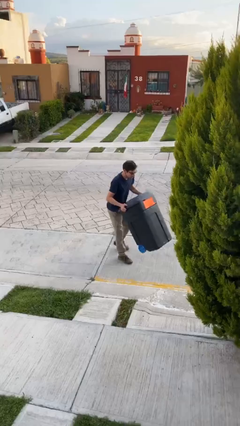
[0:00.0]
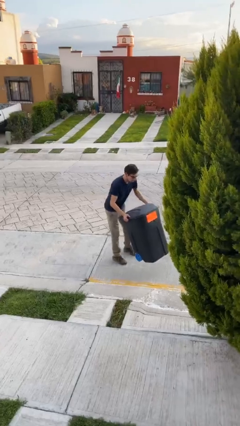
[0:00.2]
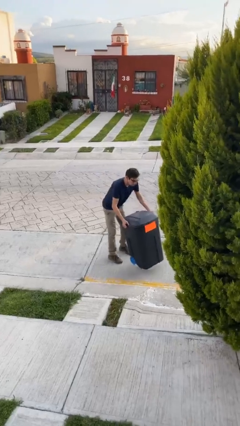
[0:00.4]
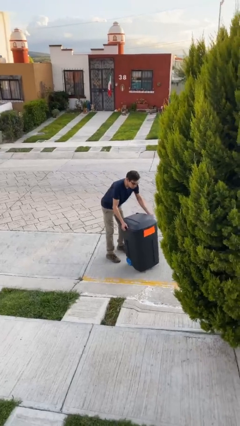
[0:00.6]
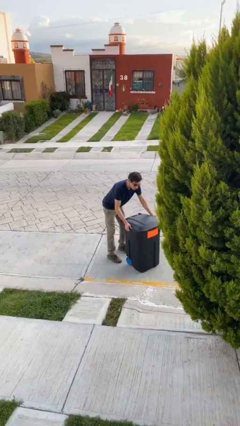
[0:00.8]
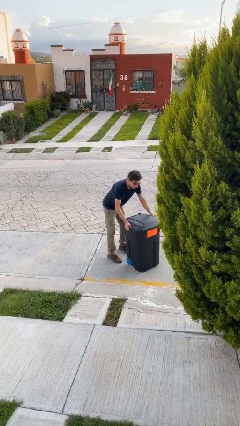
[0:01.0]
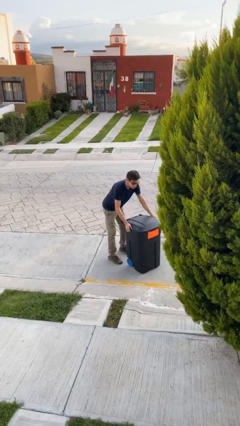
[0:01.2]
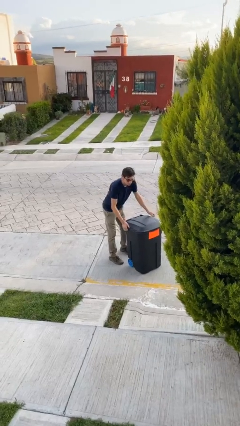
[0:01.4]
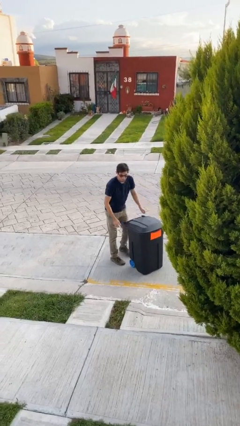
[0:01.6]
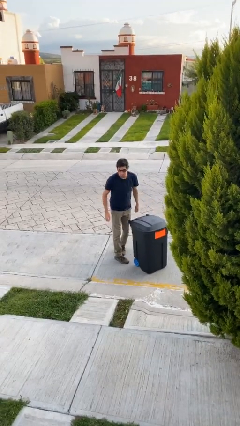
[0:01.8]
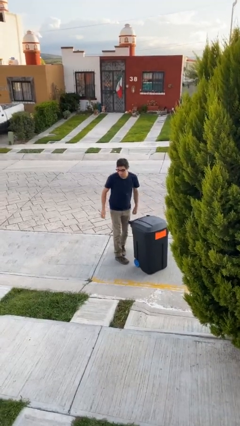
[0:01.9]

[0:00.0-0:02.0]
person puts down object on floor

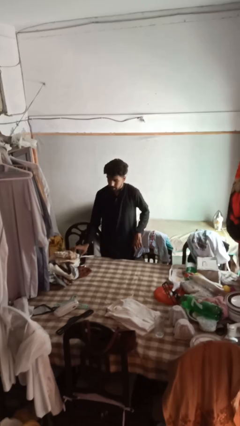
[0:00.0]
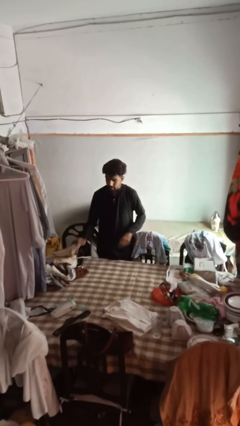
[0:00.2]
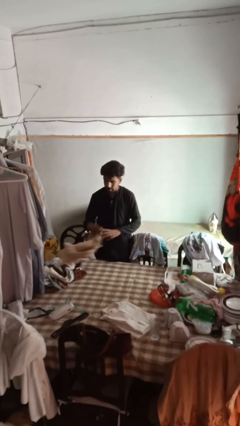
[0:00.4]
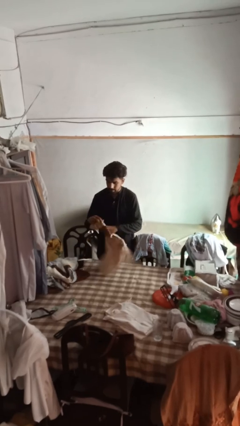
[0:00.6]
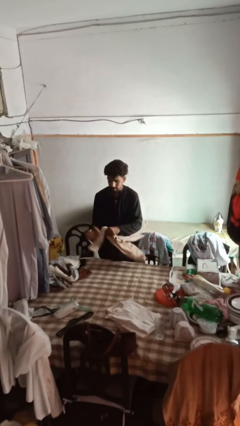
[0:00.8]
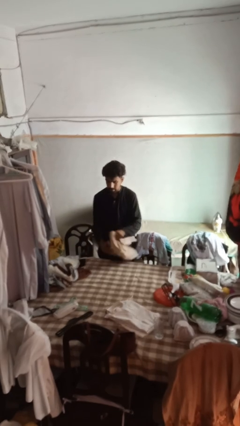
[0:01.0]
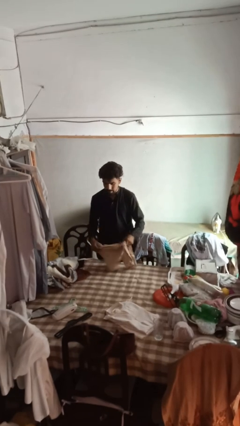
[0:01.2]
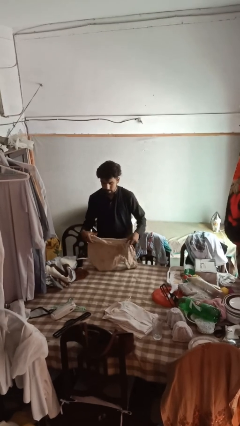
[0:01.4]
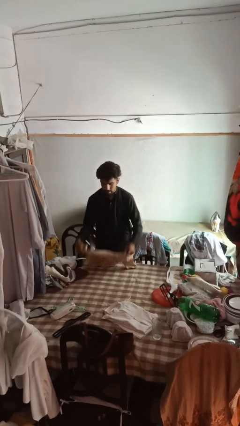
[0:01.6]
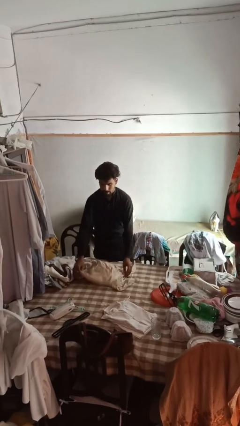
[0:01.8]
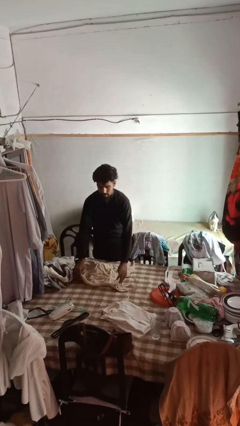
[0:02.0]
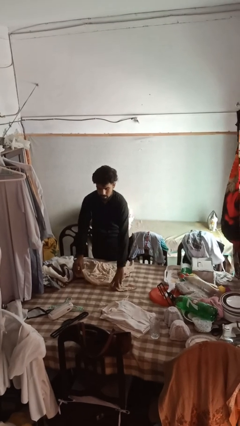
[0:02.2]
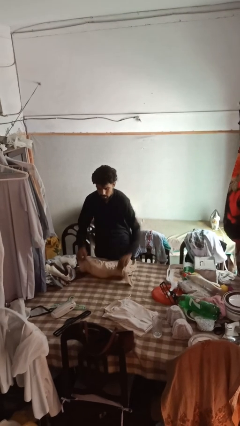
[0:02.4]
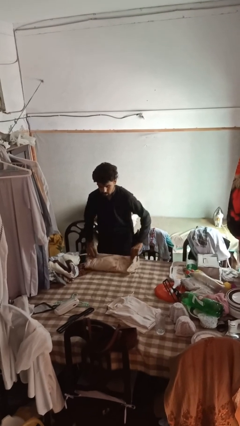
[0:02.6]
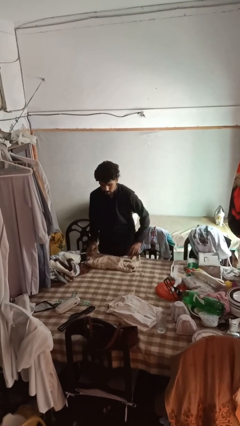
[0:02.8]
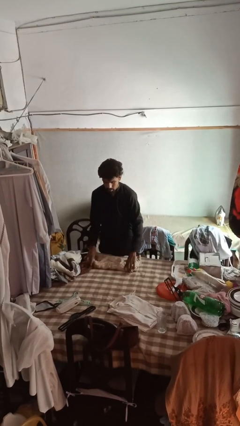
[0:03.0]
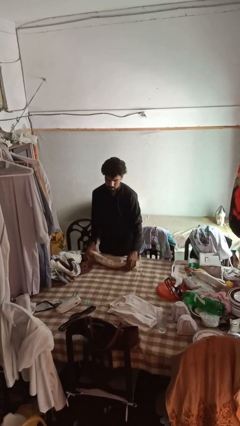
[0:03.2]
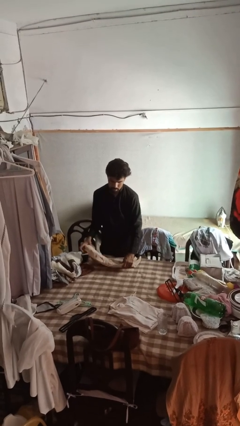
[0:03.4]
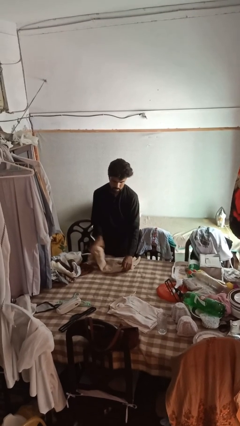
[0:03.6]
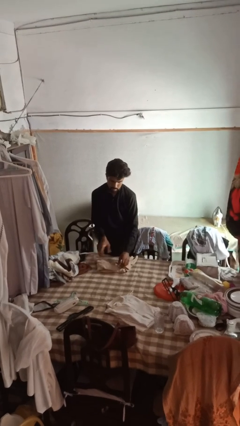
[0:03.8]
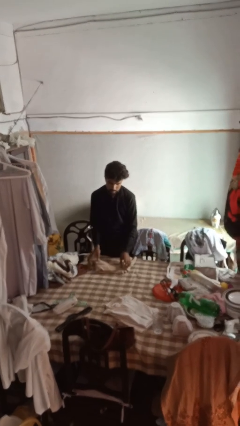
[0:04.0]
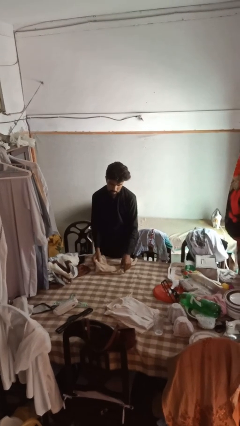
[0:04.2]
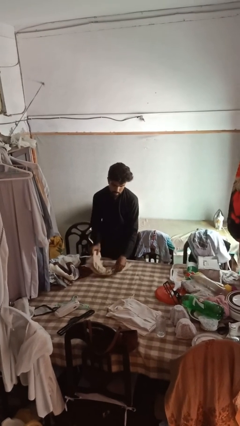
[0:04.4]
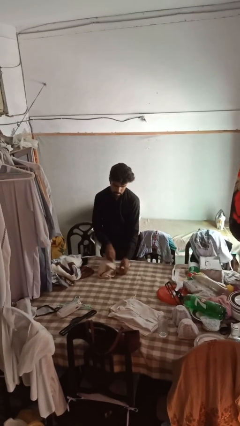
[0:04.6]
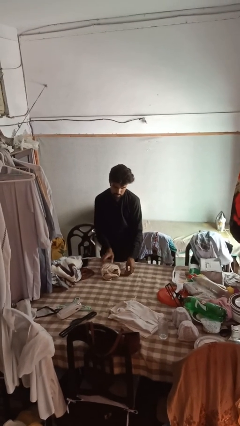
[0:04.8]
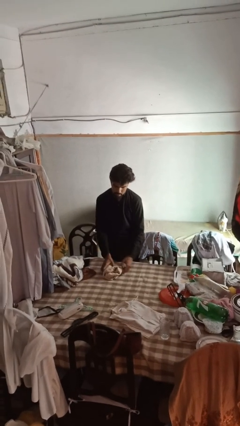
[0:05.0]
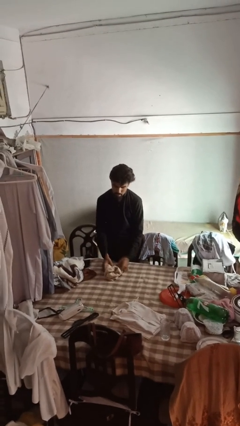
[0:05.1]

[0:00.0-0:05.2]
person folds shirt

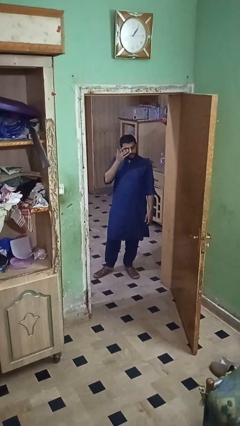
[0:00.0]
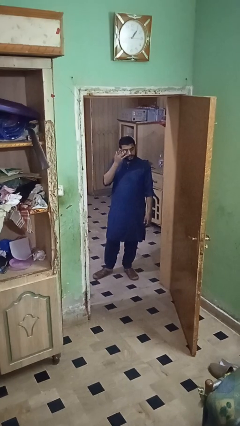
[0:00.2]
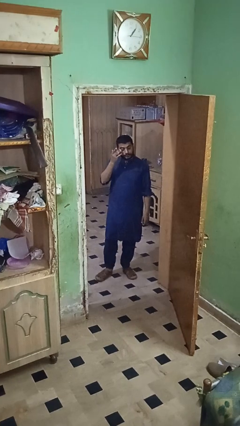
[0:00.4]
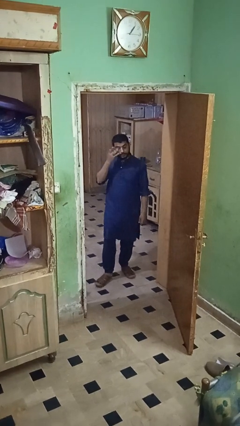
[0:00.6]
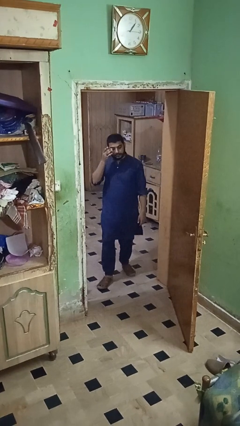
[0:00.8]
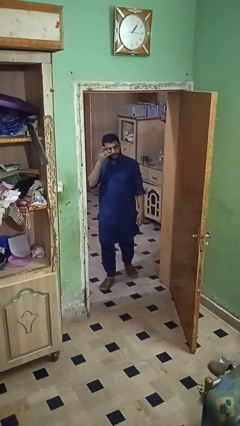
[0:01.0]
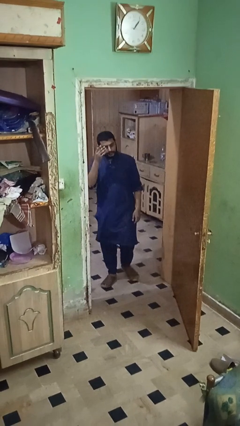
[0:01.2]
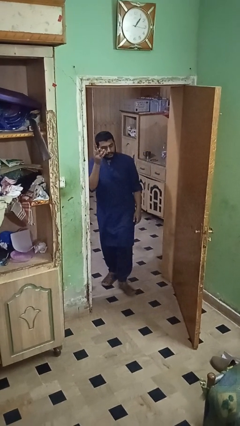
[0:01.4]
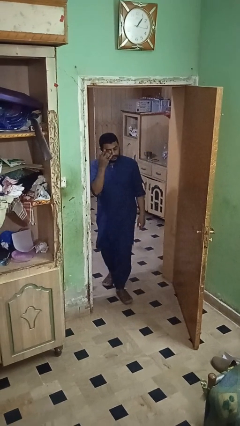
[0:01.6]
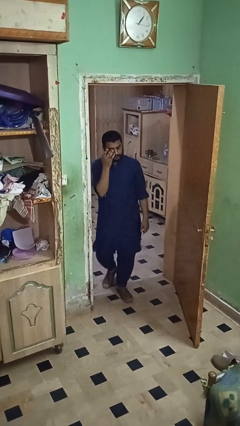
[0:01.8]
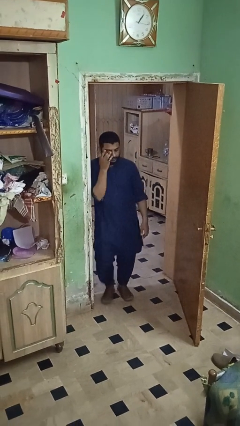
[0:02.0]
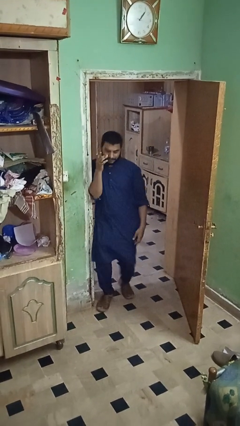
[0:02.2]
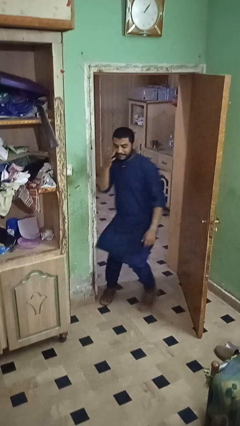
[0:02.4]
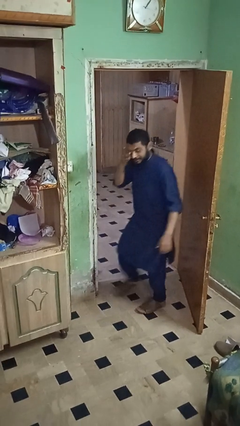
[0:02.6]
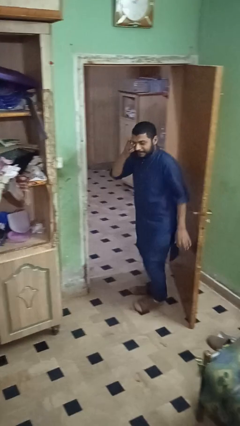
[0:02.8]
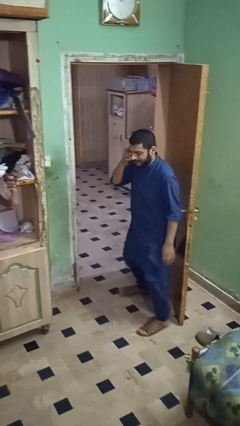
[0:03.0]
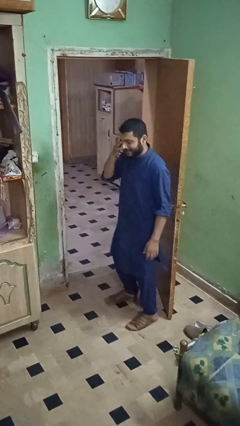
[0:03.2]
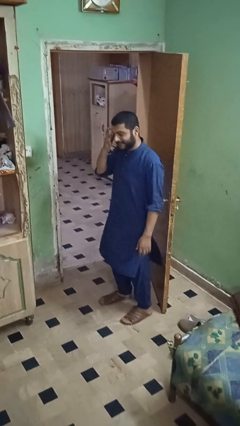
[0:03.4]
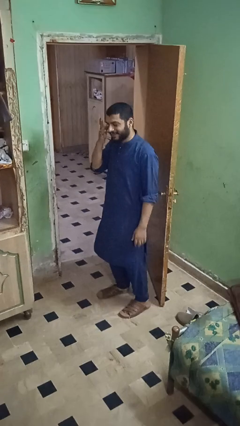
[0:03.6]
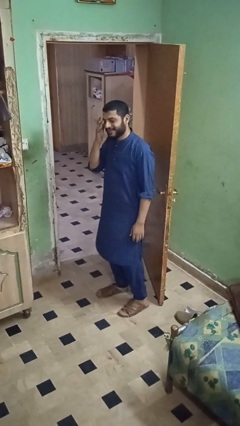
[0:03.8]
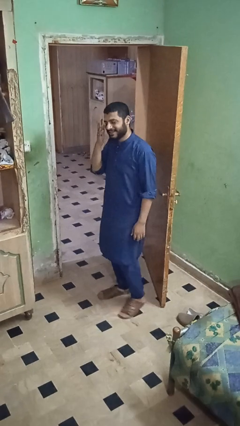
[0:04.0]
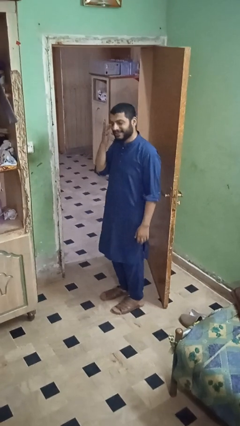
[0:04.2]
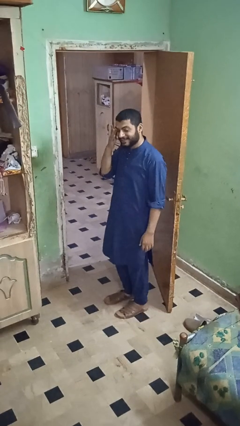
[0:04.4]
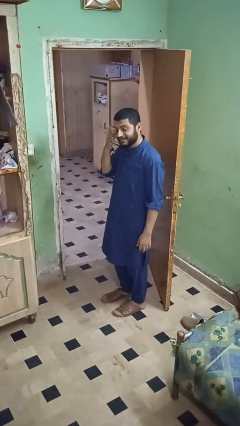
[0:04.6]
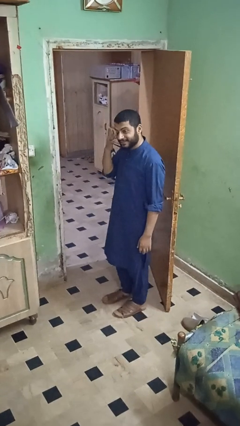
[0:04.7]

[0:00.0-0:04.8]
person bumps into wall

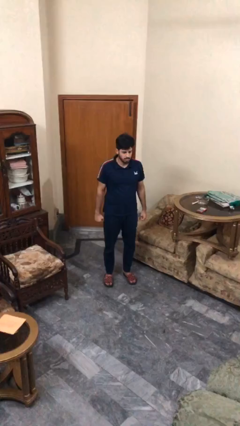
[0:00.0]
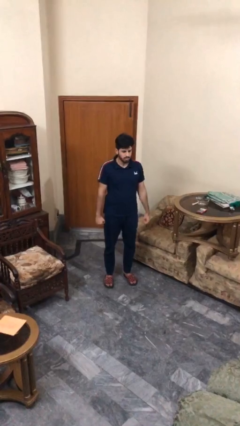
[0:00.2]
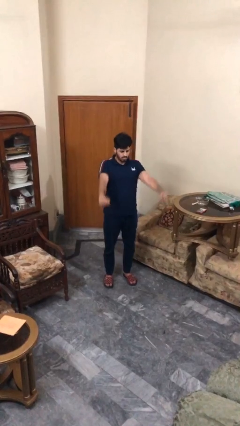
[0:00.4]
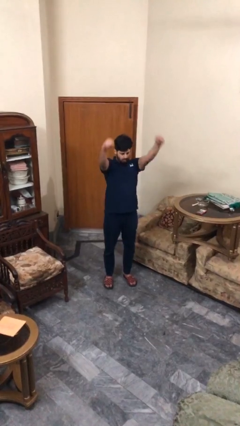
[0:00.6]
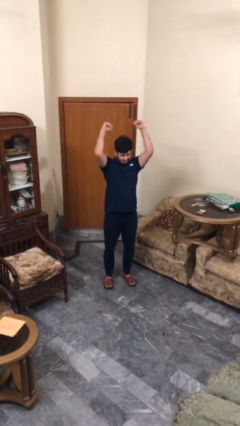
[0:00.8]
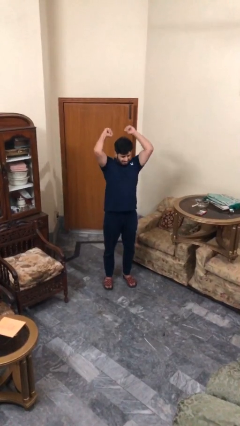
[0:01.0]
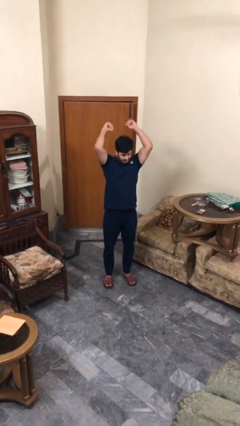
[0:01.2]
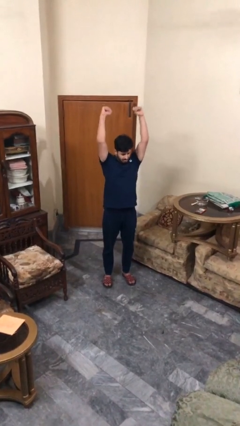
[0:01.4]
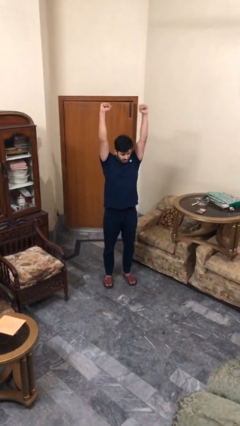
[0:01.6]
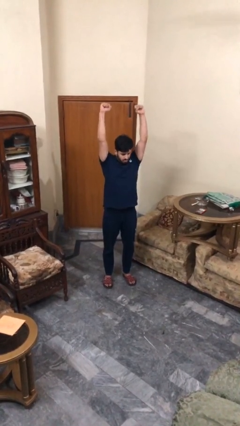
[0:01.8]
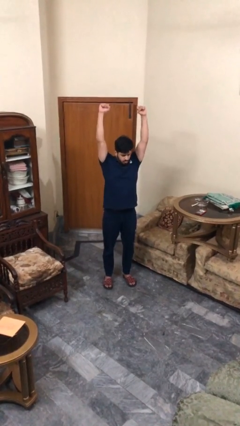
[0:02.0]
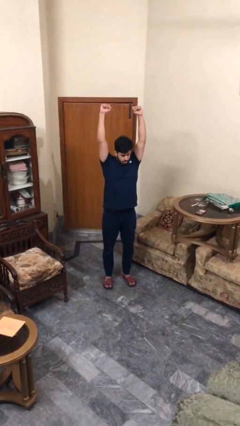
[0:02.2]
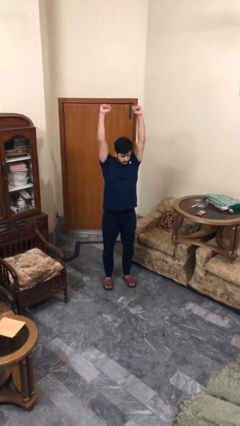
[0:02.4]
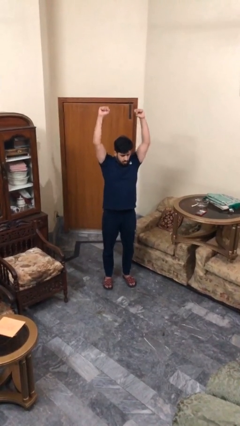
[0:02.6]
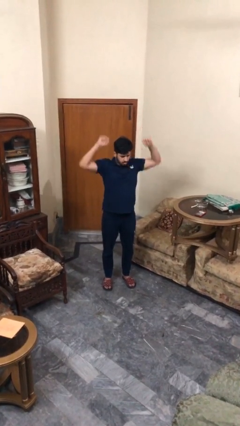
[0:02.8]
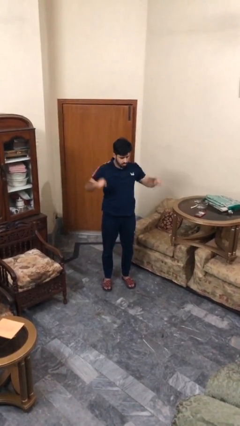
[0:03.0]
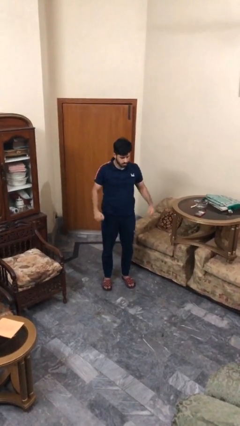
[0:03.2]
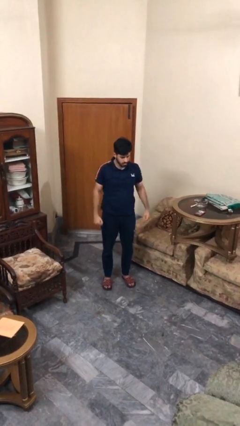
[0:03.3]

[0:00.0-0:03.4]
person stretches arms over head

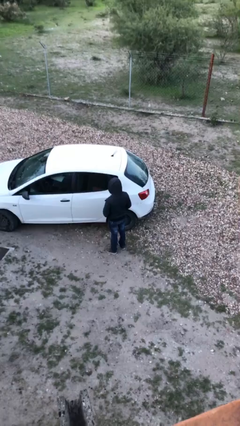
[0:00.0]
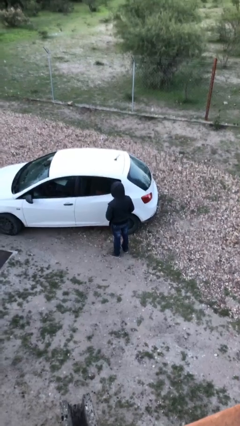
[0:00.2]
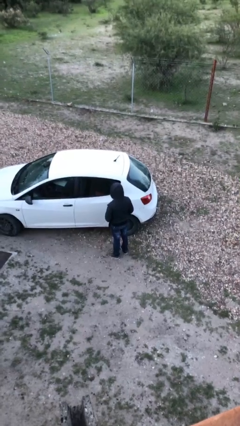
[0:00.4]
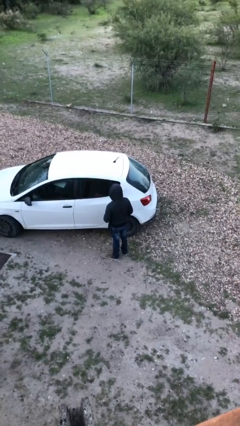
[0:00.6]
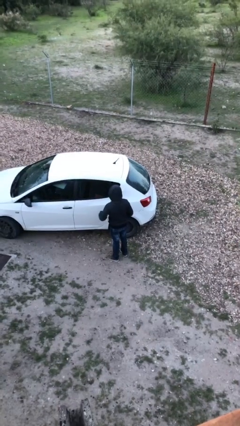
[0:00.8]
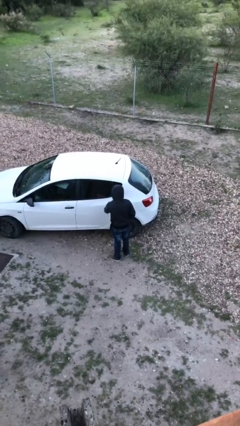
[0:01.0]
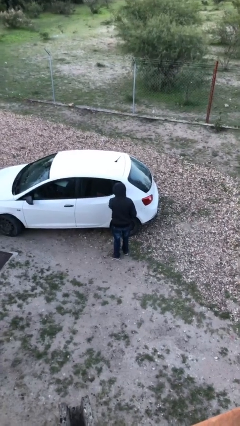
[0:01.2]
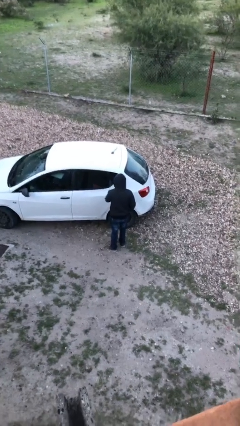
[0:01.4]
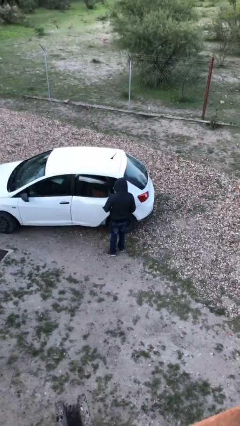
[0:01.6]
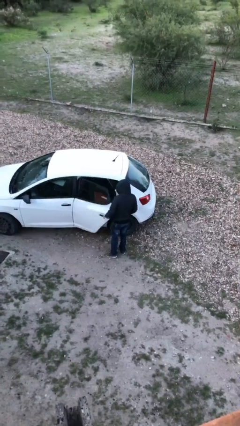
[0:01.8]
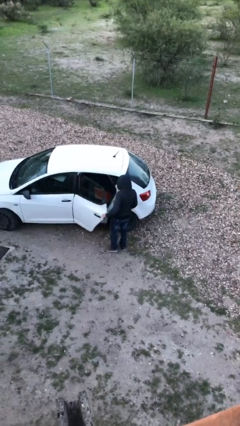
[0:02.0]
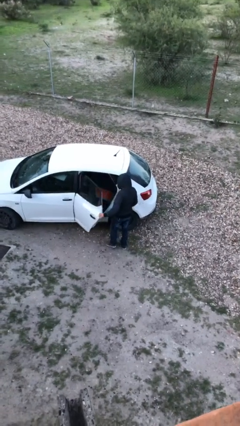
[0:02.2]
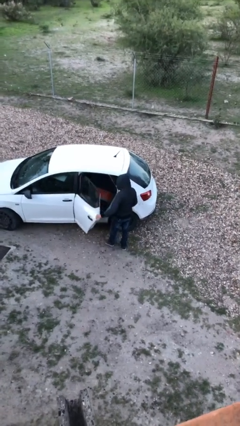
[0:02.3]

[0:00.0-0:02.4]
person opens car door
